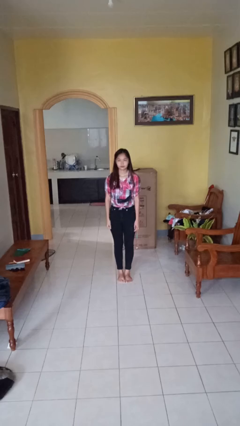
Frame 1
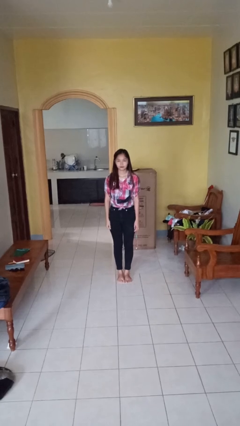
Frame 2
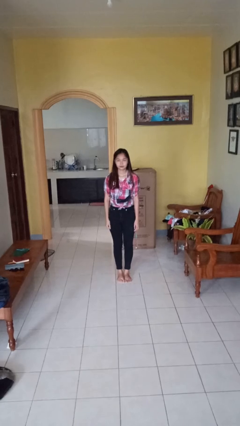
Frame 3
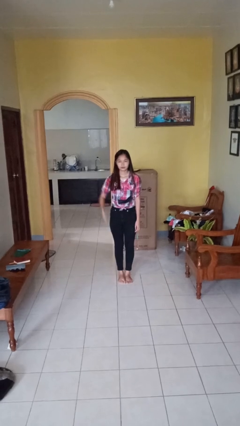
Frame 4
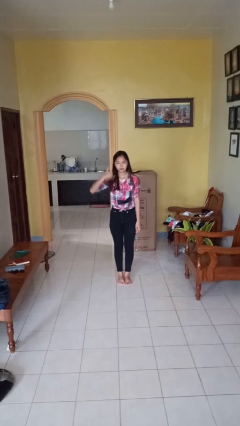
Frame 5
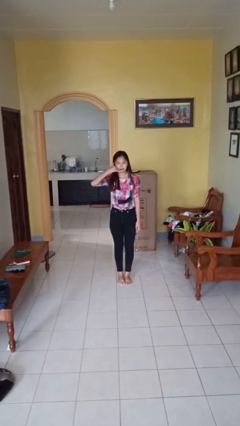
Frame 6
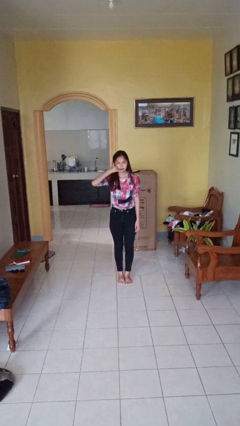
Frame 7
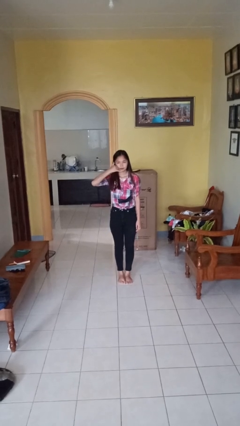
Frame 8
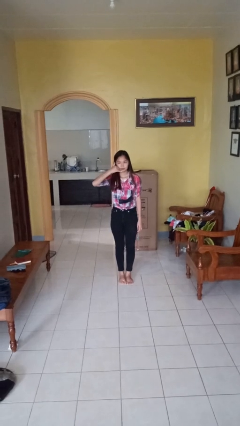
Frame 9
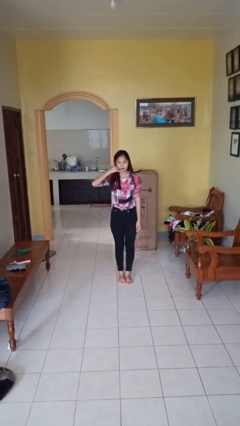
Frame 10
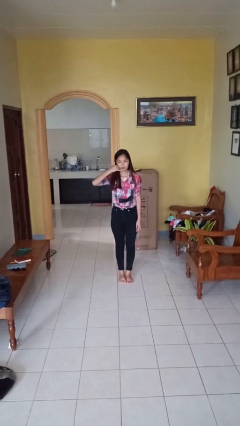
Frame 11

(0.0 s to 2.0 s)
person gestures call me

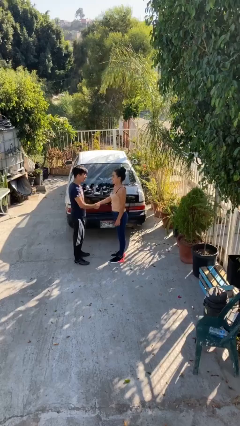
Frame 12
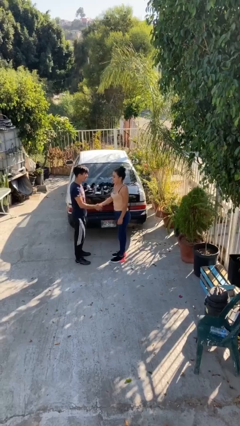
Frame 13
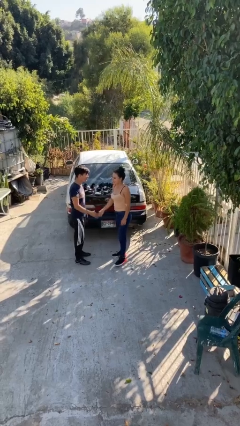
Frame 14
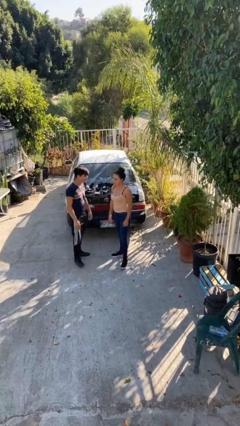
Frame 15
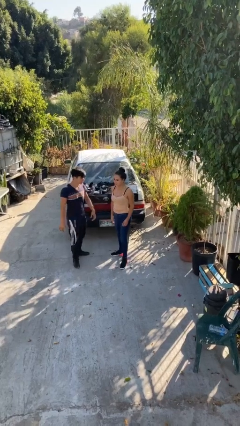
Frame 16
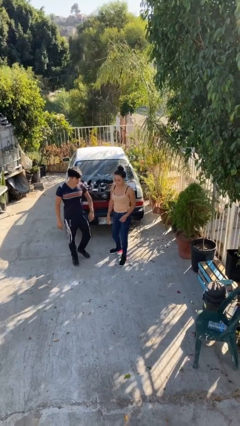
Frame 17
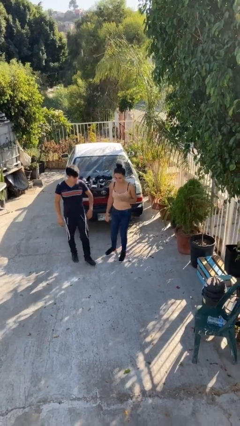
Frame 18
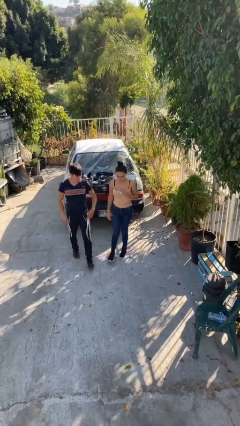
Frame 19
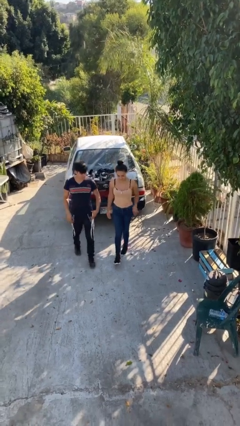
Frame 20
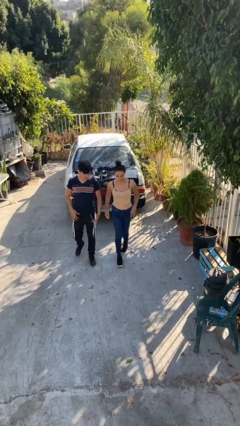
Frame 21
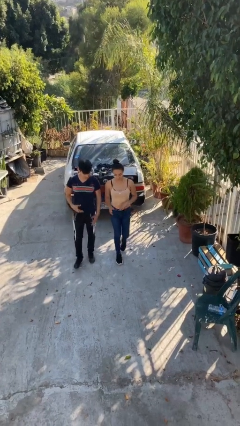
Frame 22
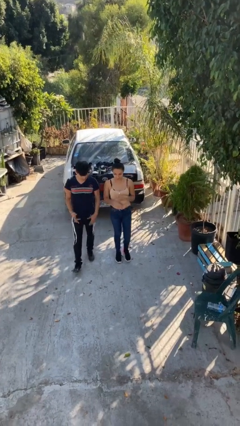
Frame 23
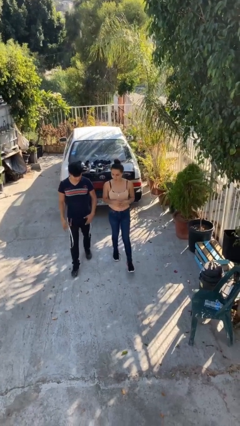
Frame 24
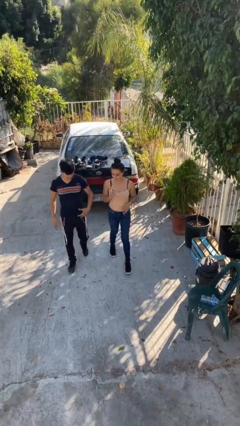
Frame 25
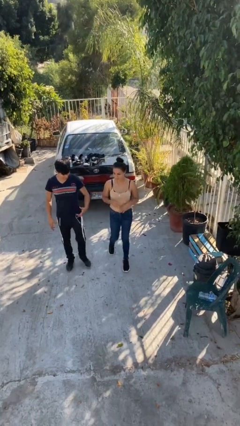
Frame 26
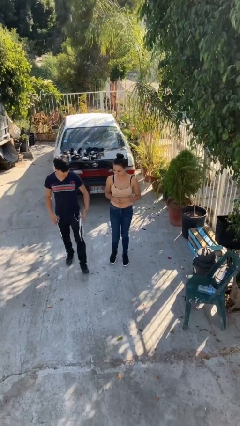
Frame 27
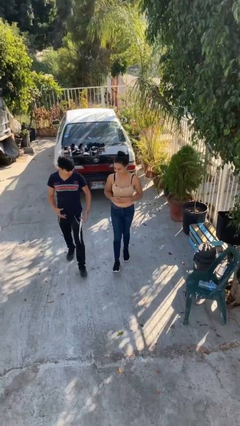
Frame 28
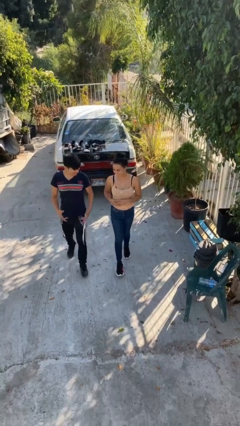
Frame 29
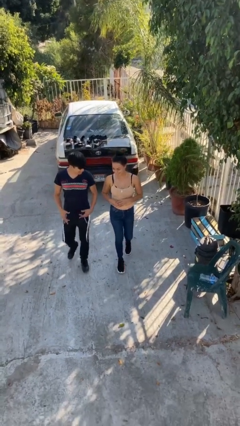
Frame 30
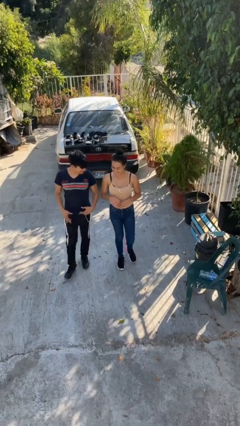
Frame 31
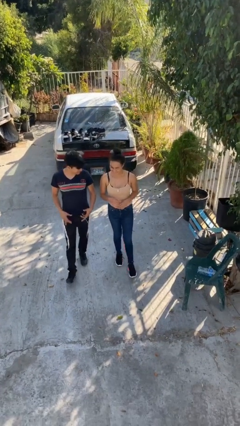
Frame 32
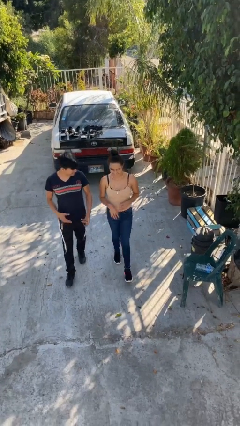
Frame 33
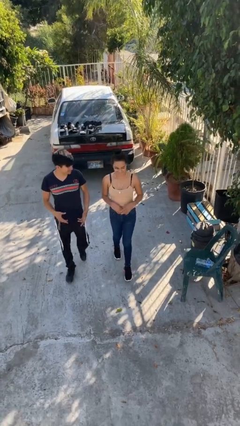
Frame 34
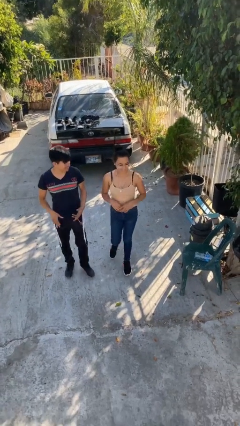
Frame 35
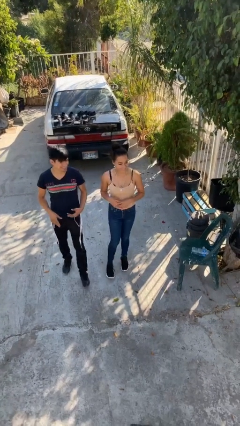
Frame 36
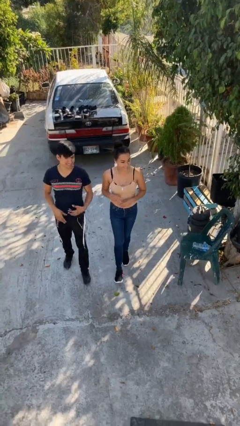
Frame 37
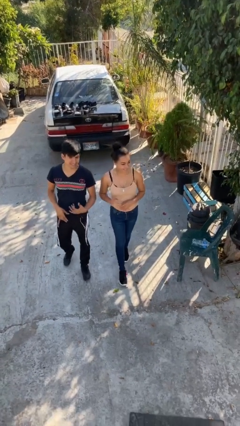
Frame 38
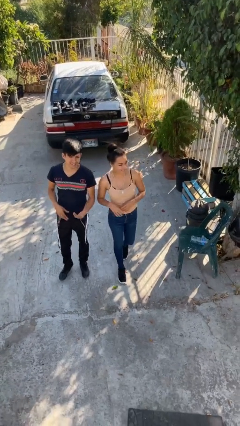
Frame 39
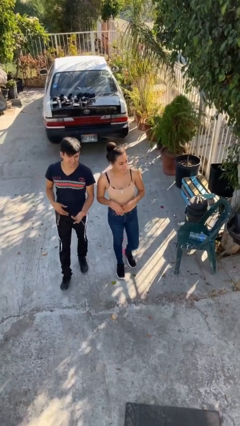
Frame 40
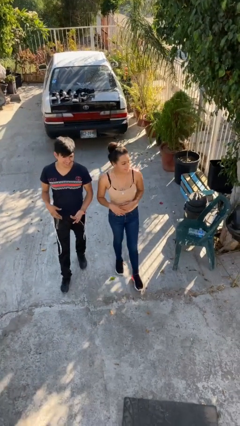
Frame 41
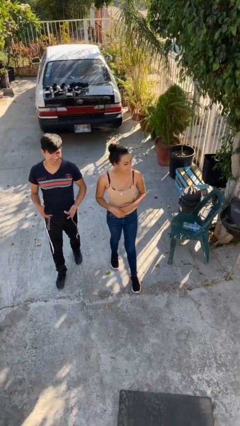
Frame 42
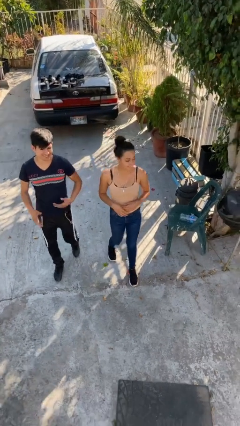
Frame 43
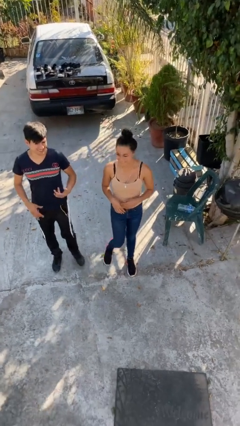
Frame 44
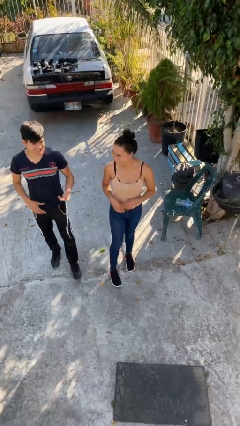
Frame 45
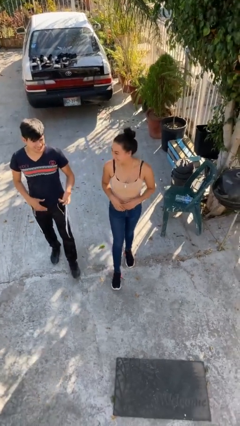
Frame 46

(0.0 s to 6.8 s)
person talks to person

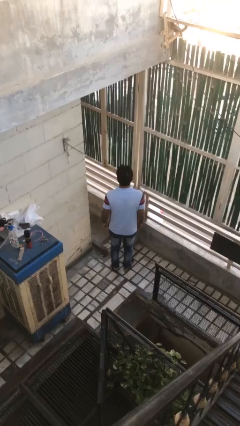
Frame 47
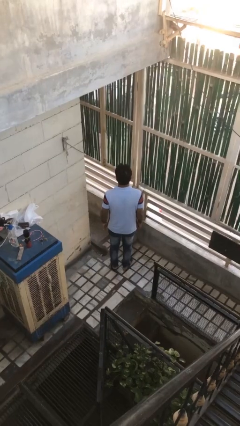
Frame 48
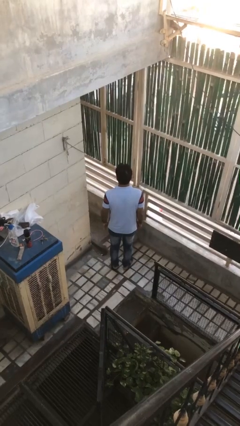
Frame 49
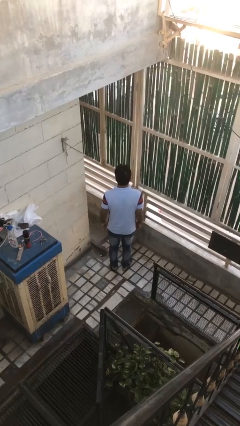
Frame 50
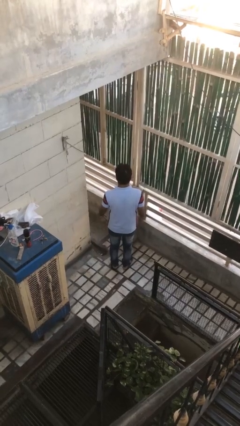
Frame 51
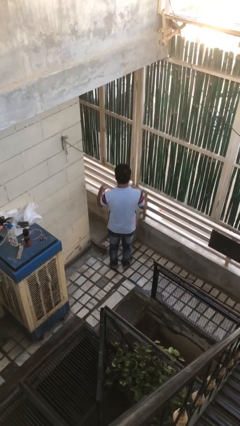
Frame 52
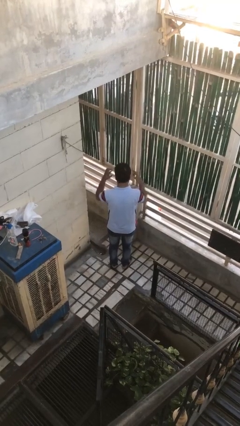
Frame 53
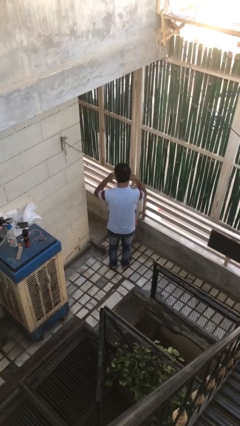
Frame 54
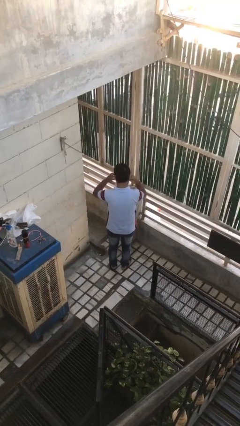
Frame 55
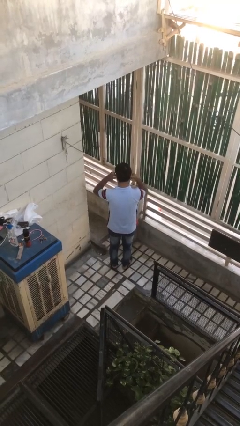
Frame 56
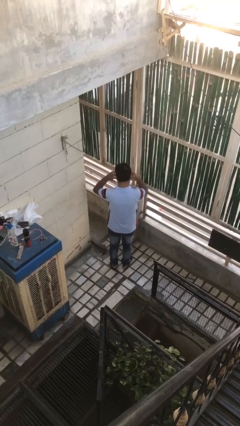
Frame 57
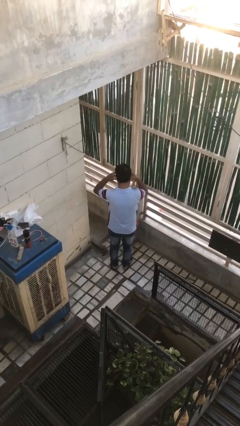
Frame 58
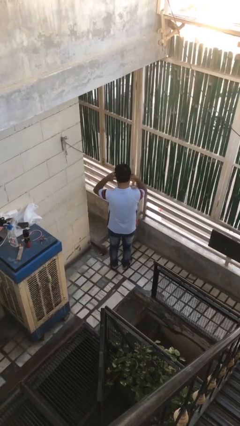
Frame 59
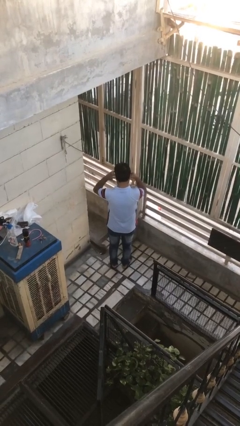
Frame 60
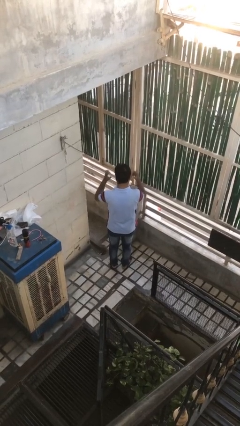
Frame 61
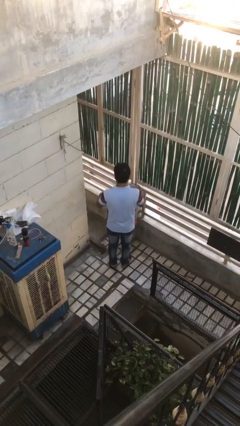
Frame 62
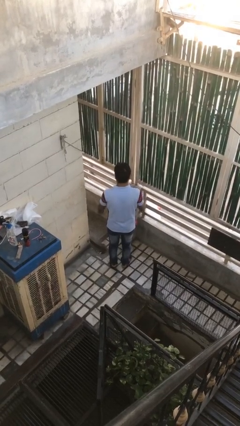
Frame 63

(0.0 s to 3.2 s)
person puts fingers in ear

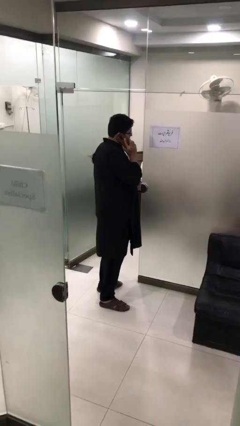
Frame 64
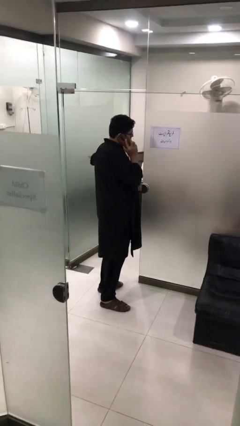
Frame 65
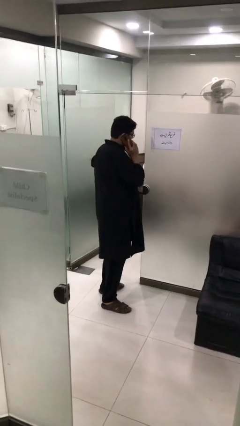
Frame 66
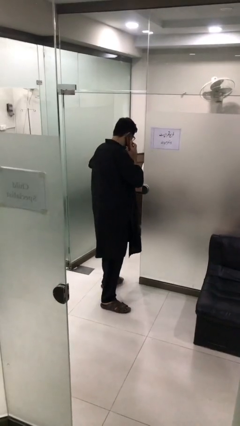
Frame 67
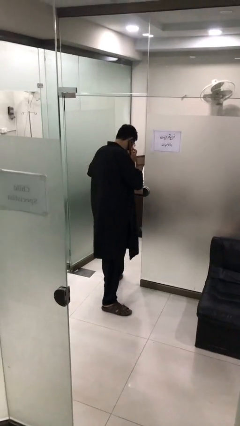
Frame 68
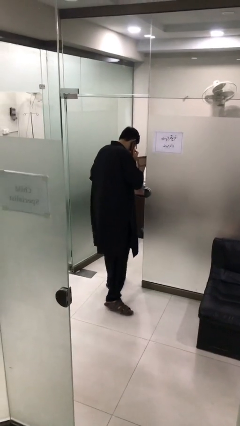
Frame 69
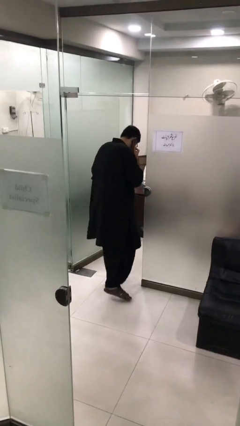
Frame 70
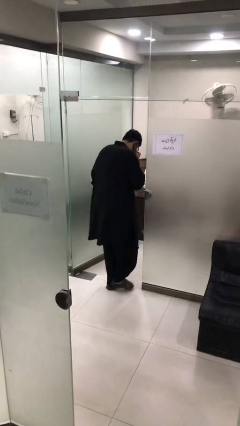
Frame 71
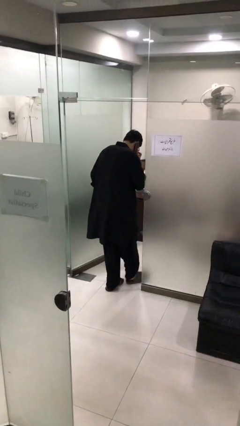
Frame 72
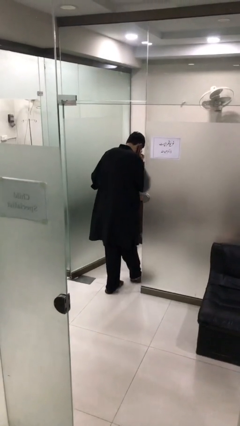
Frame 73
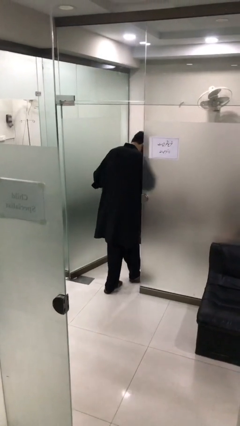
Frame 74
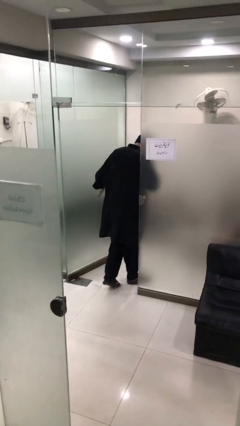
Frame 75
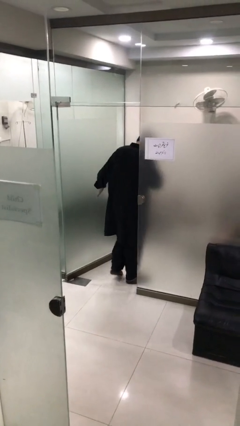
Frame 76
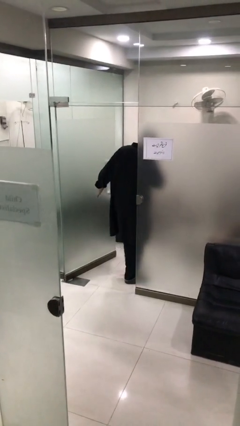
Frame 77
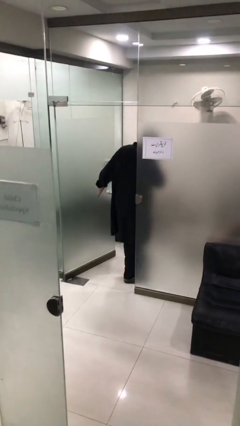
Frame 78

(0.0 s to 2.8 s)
person exits scene through structure

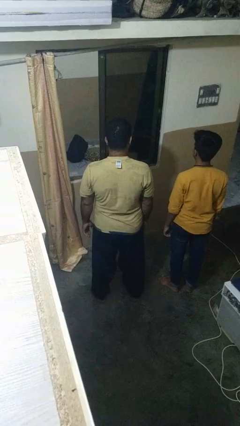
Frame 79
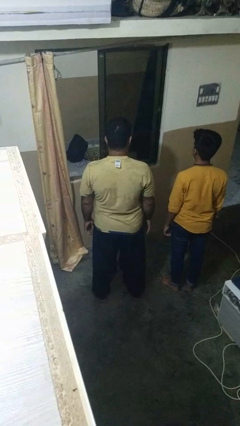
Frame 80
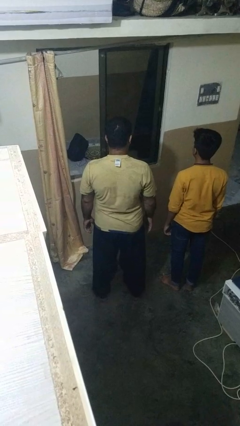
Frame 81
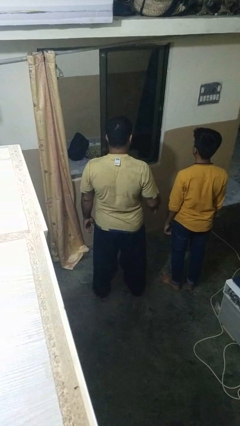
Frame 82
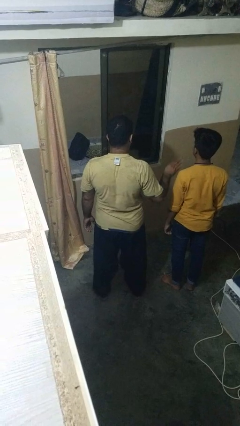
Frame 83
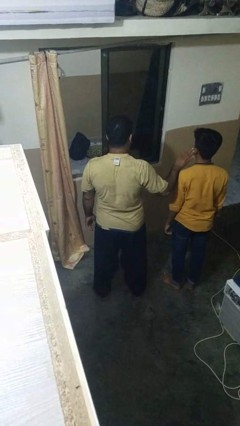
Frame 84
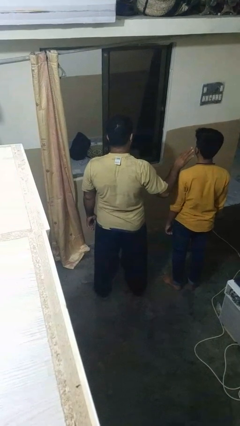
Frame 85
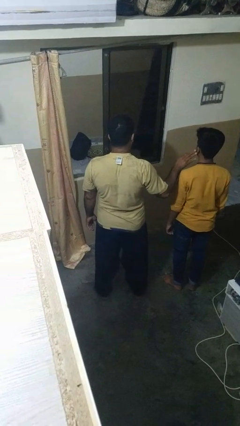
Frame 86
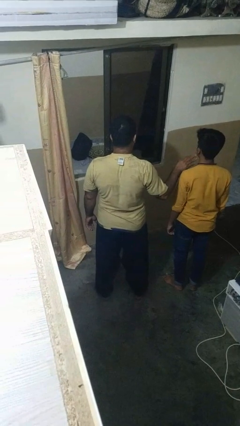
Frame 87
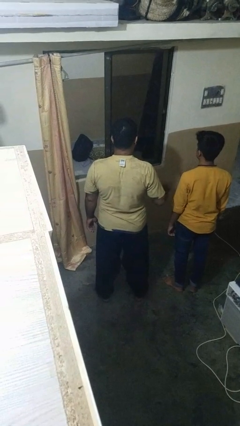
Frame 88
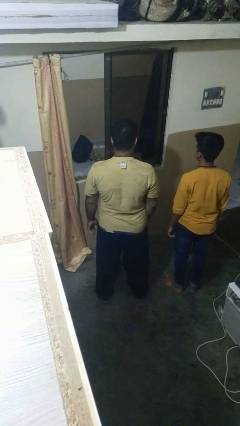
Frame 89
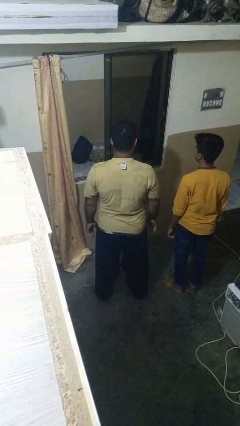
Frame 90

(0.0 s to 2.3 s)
person touches face of person

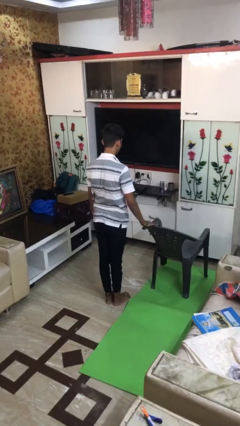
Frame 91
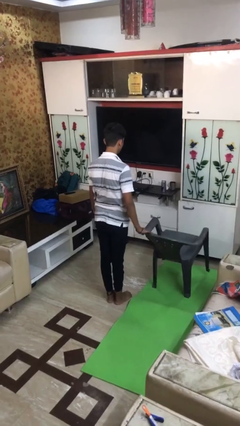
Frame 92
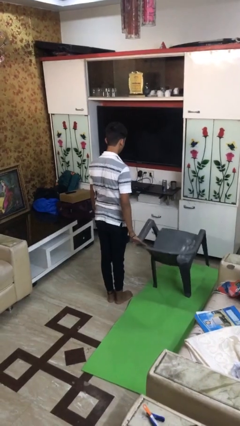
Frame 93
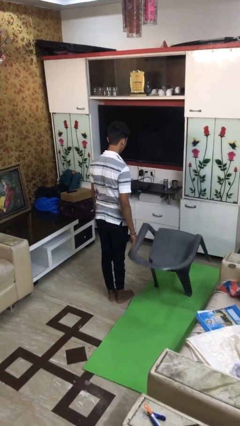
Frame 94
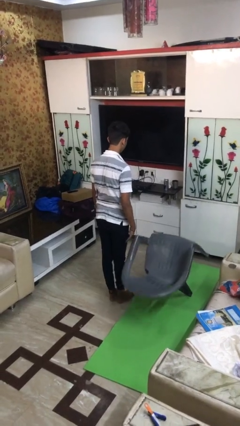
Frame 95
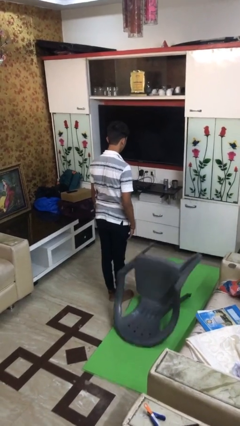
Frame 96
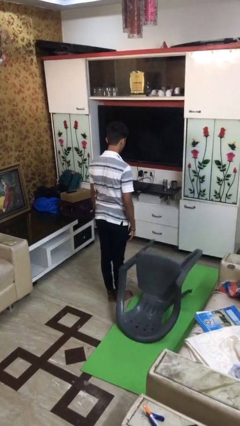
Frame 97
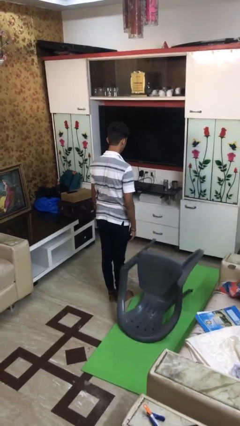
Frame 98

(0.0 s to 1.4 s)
person knocks over furniture
